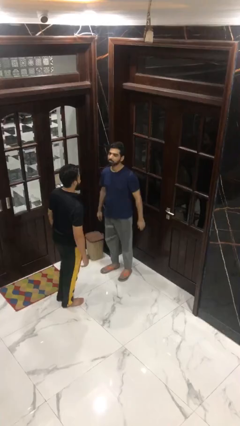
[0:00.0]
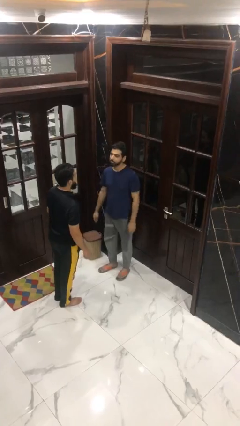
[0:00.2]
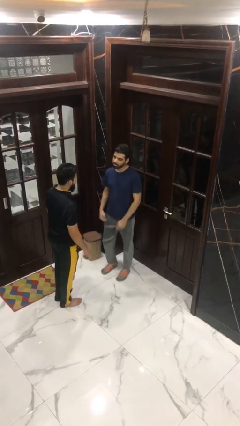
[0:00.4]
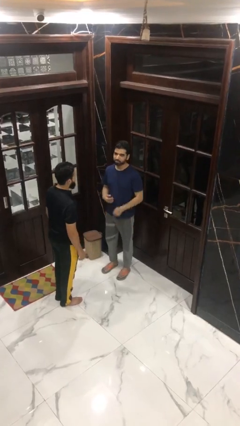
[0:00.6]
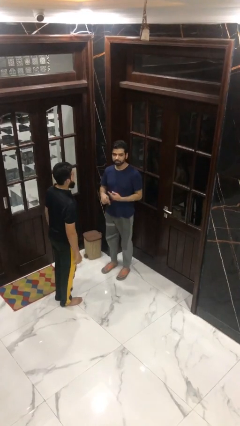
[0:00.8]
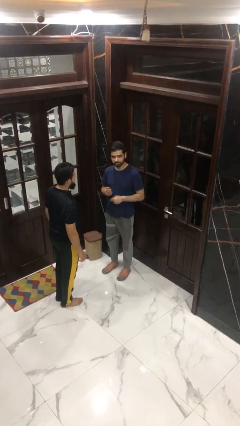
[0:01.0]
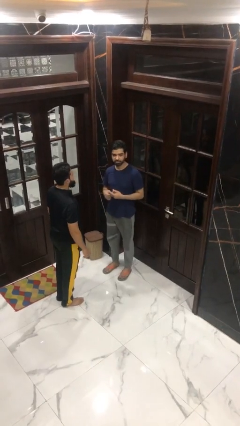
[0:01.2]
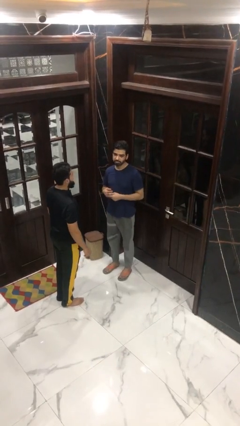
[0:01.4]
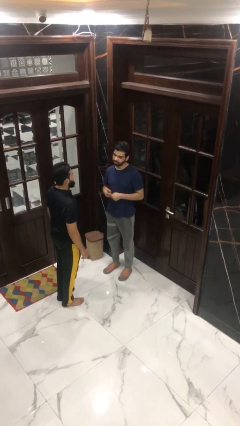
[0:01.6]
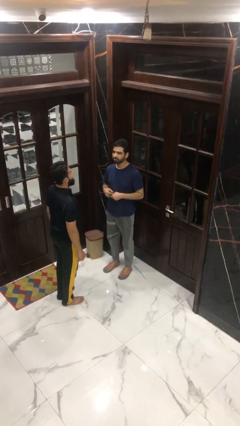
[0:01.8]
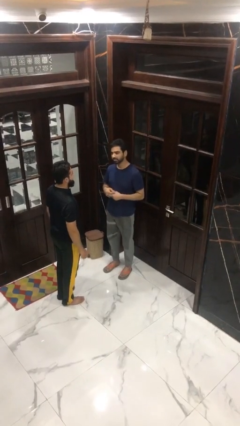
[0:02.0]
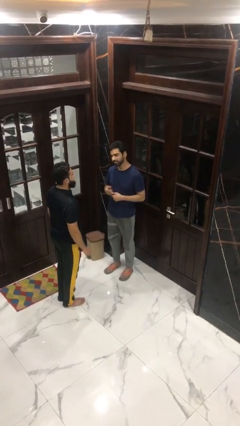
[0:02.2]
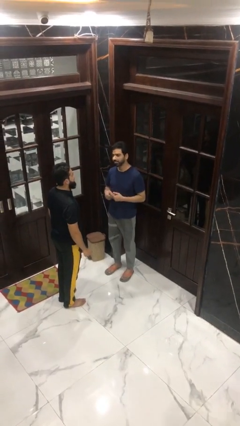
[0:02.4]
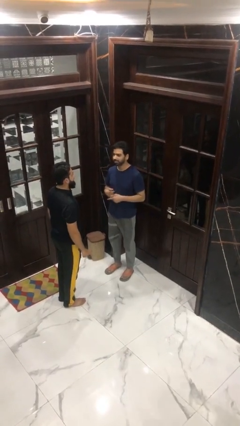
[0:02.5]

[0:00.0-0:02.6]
person talks to person

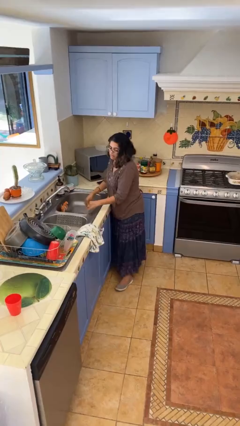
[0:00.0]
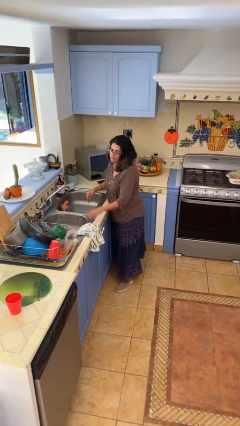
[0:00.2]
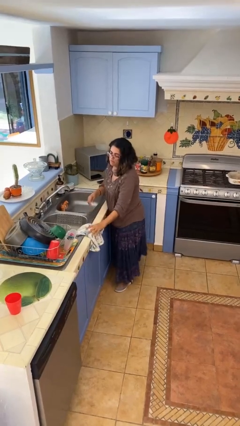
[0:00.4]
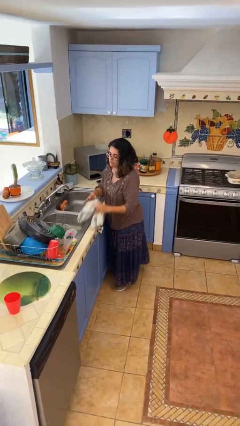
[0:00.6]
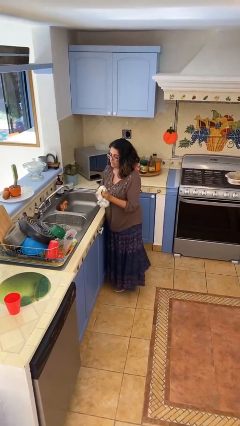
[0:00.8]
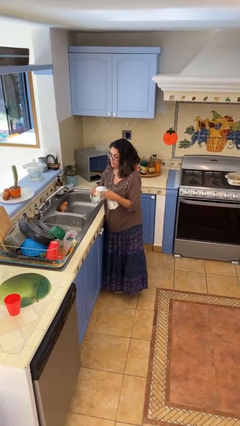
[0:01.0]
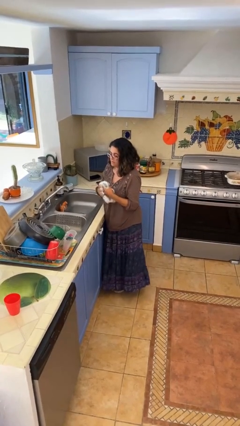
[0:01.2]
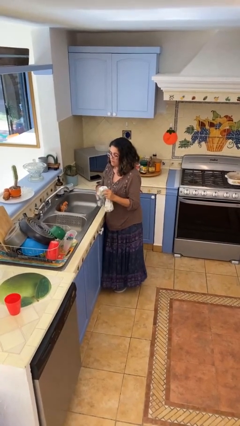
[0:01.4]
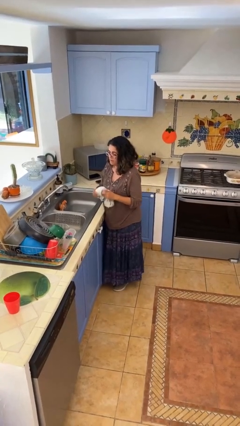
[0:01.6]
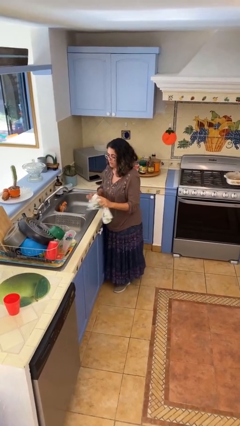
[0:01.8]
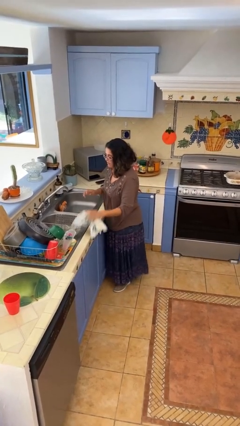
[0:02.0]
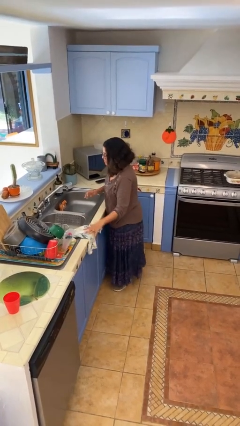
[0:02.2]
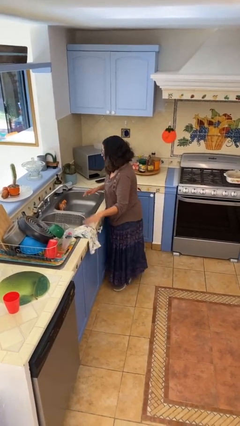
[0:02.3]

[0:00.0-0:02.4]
person dries hands with towel

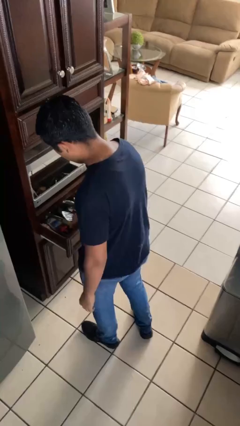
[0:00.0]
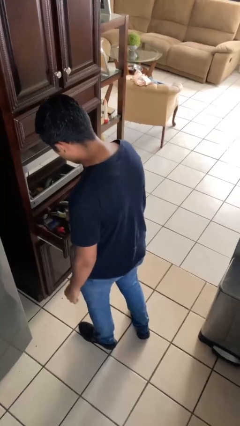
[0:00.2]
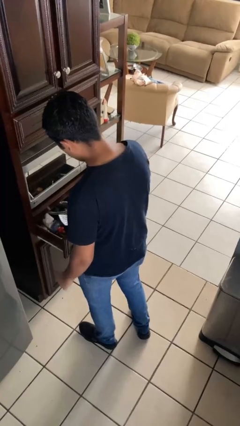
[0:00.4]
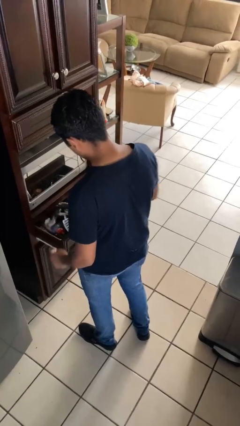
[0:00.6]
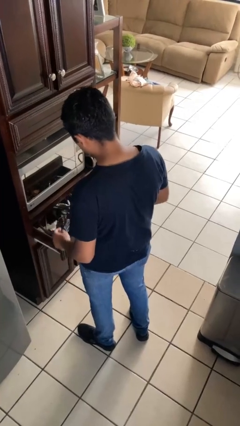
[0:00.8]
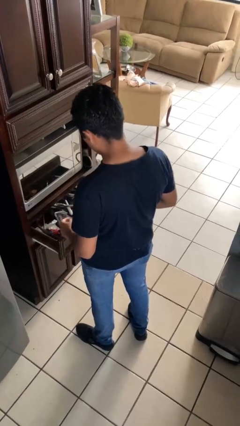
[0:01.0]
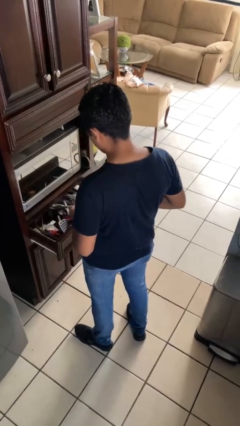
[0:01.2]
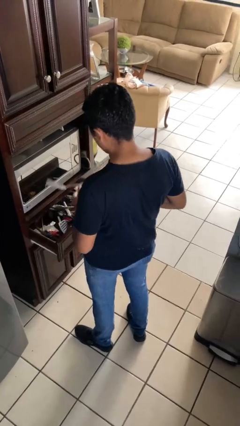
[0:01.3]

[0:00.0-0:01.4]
person takes object from kitchen drawer

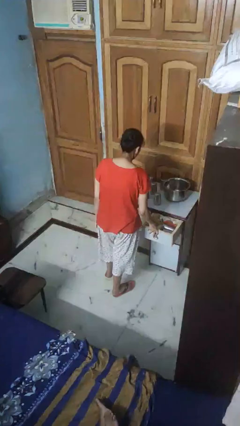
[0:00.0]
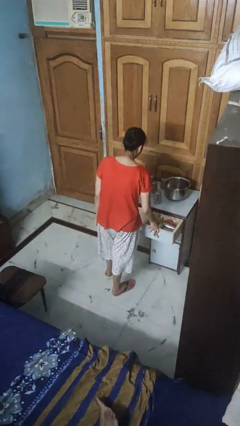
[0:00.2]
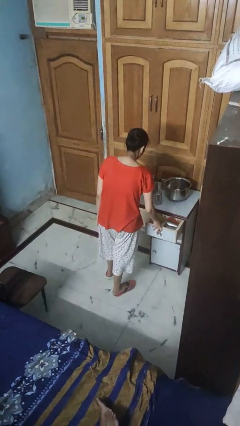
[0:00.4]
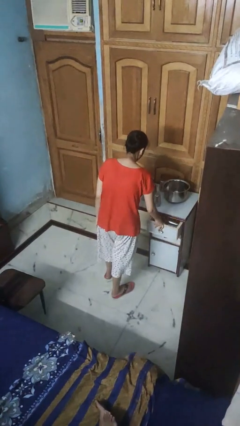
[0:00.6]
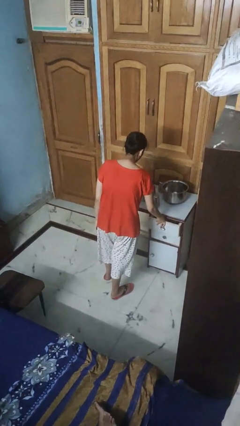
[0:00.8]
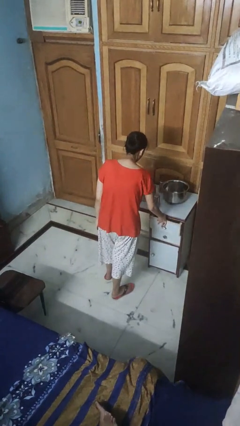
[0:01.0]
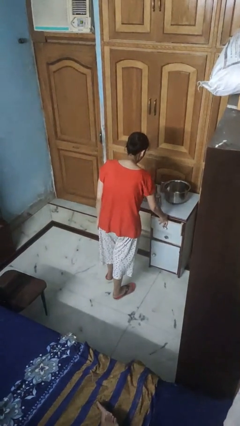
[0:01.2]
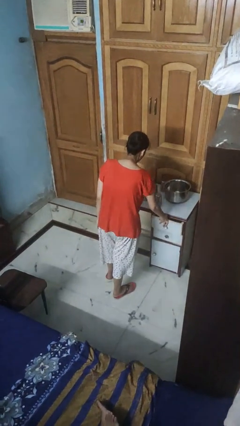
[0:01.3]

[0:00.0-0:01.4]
person closes kitchen drawer

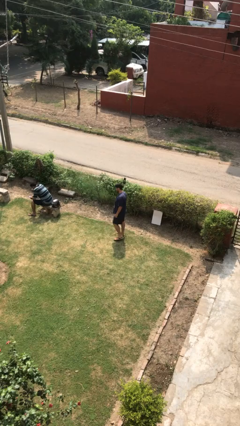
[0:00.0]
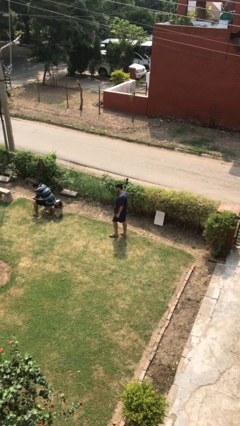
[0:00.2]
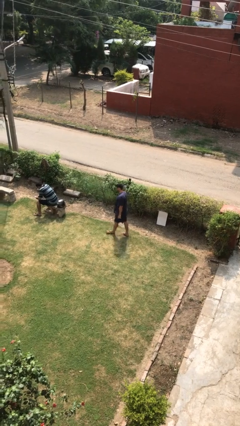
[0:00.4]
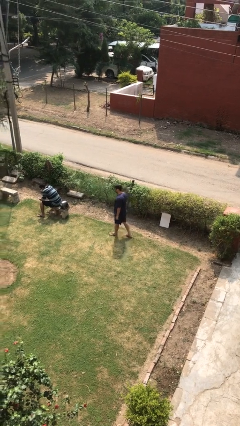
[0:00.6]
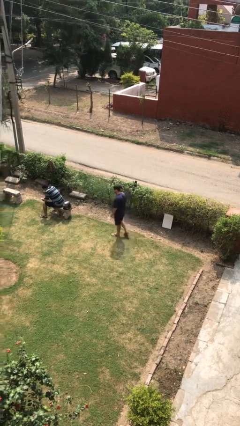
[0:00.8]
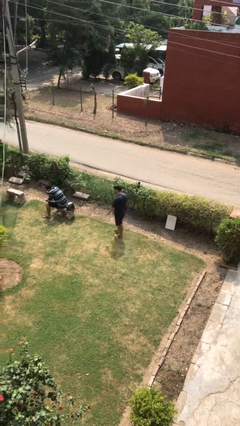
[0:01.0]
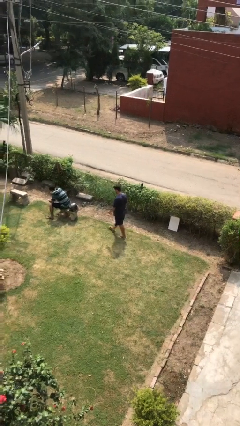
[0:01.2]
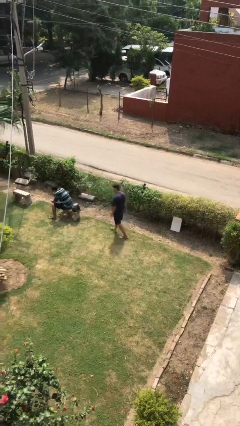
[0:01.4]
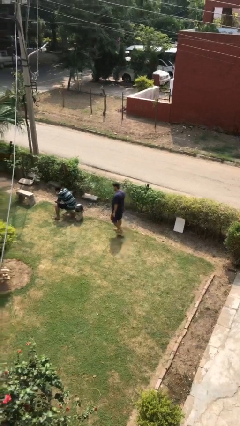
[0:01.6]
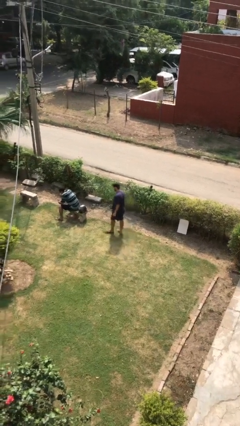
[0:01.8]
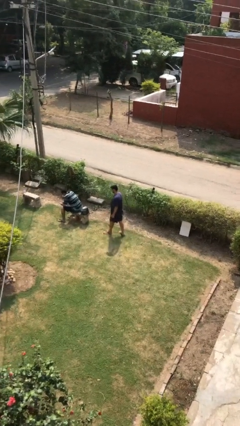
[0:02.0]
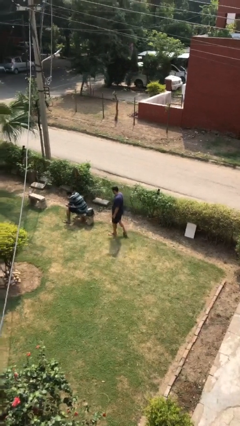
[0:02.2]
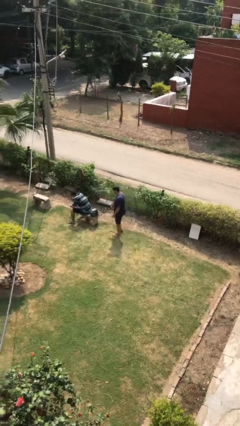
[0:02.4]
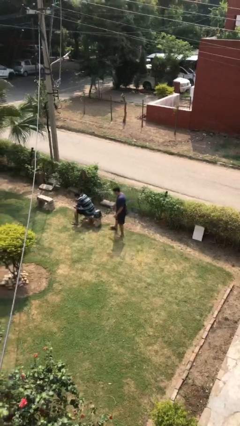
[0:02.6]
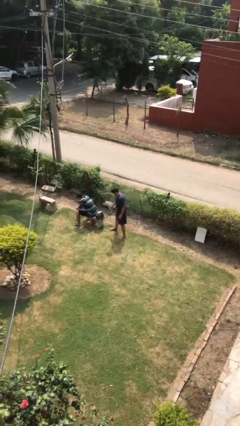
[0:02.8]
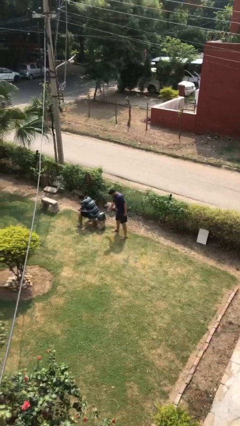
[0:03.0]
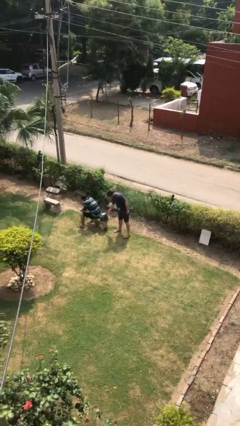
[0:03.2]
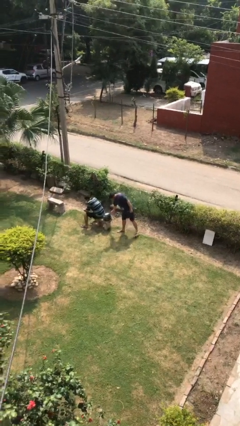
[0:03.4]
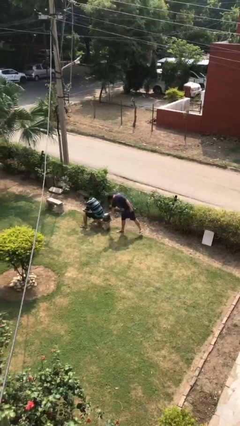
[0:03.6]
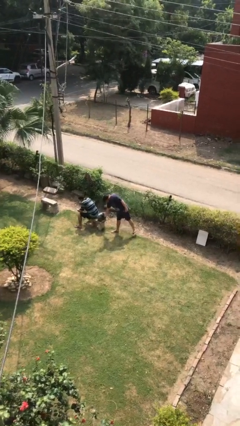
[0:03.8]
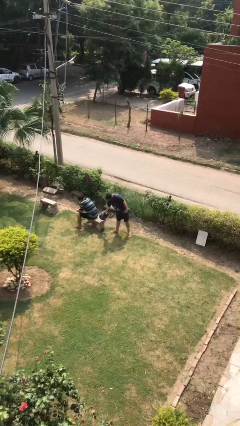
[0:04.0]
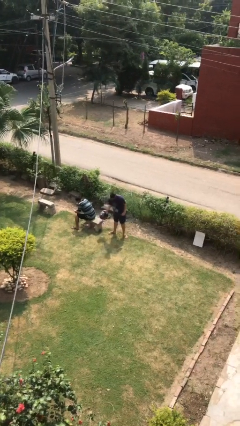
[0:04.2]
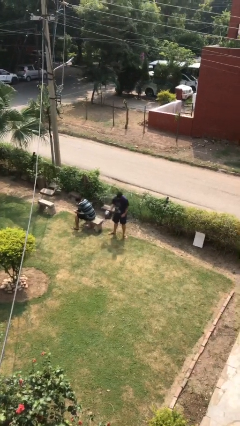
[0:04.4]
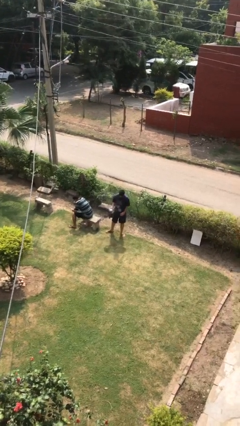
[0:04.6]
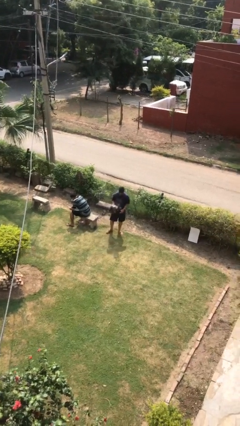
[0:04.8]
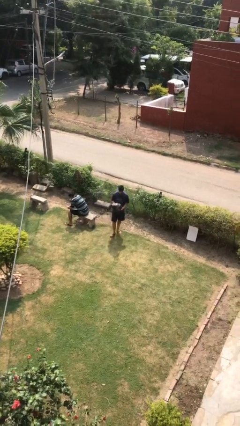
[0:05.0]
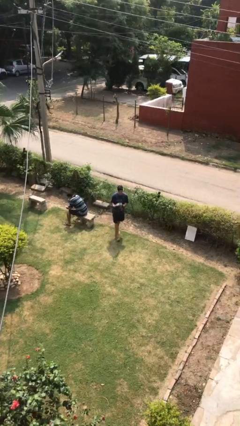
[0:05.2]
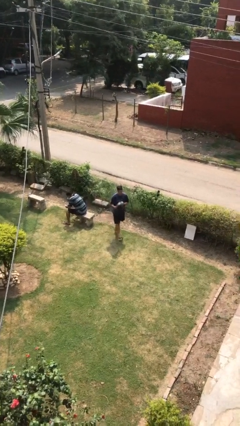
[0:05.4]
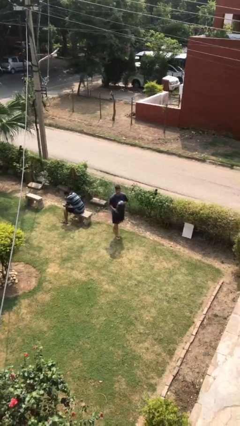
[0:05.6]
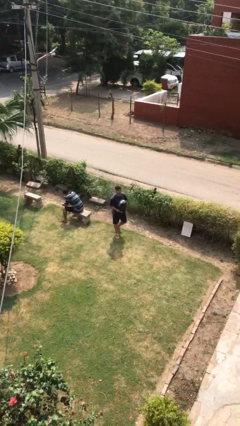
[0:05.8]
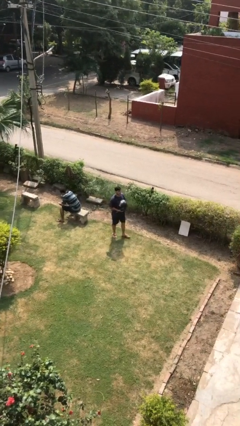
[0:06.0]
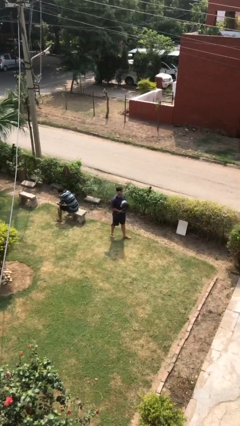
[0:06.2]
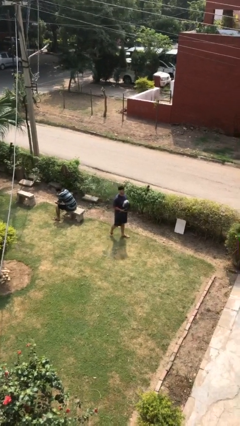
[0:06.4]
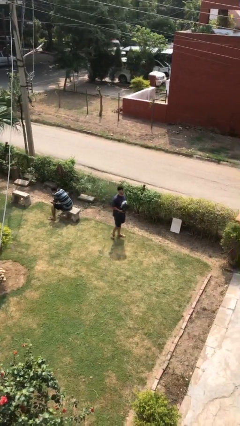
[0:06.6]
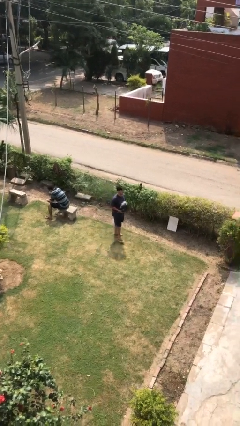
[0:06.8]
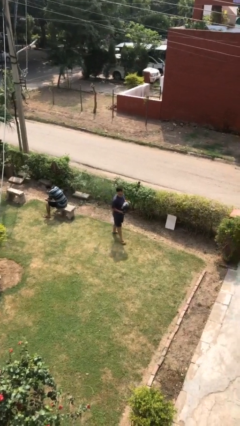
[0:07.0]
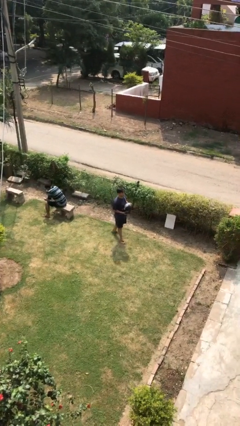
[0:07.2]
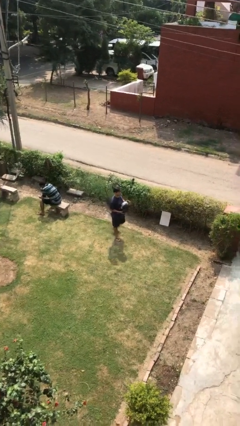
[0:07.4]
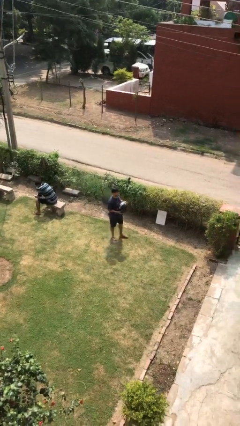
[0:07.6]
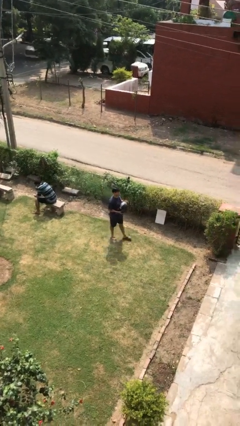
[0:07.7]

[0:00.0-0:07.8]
person steals object from person

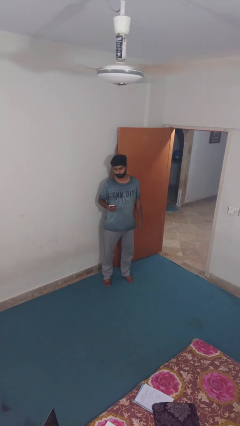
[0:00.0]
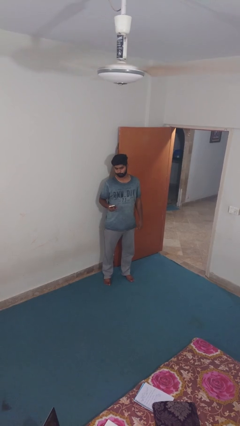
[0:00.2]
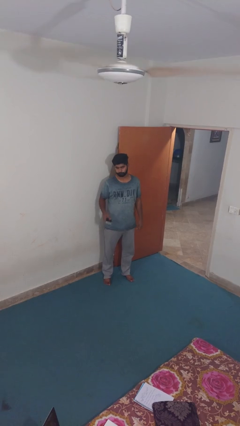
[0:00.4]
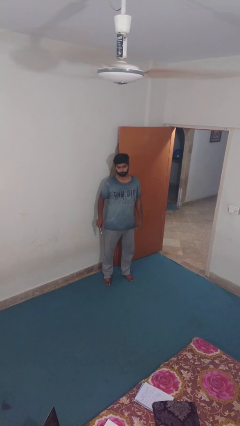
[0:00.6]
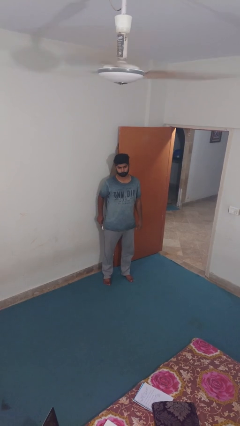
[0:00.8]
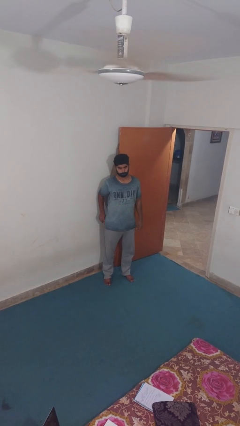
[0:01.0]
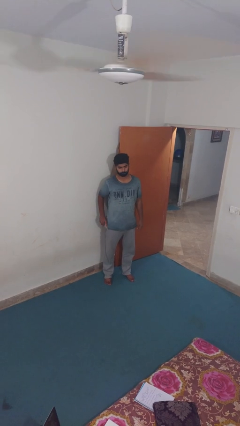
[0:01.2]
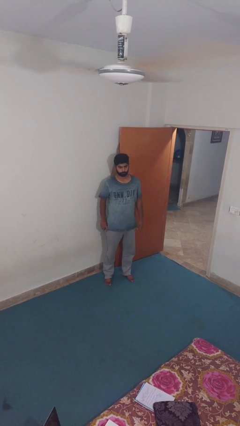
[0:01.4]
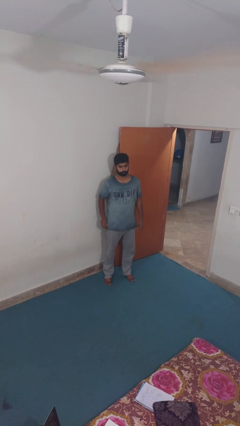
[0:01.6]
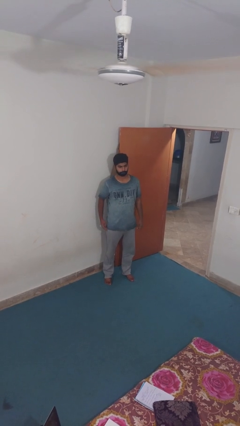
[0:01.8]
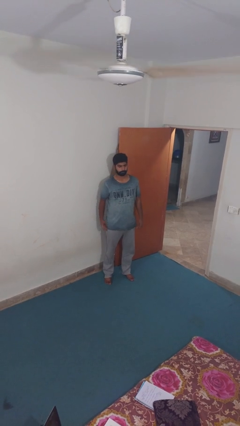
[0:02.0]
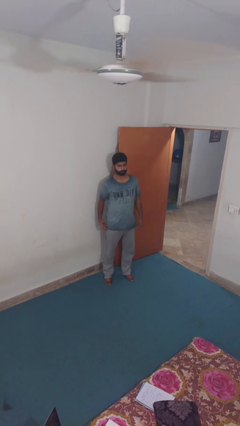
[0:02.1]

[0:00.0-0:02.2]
person puts phone into pocket
